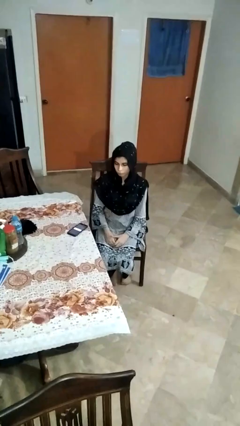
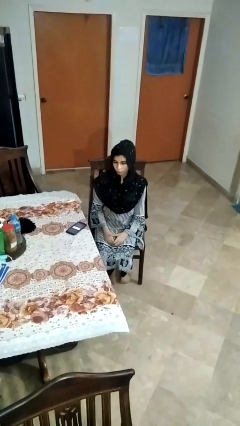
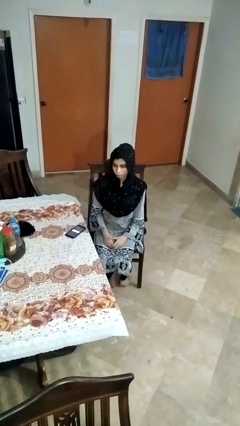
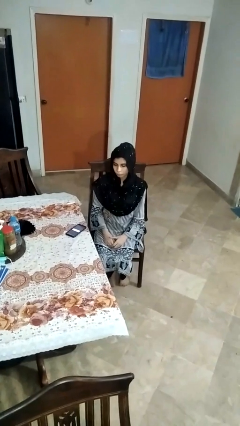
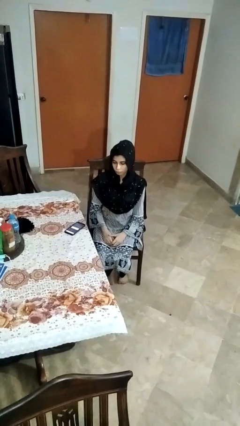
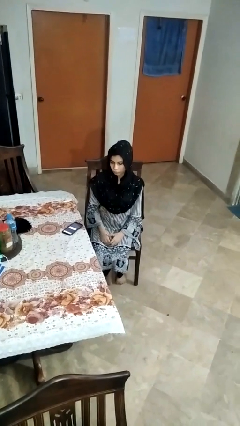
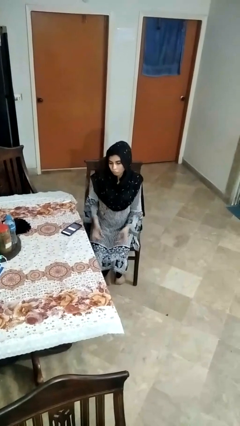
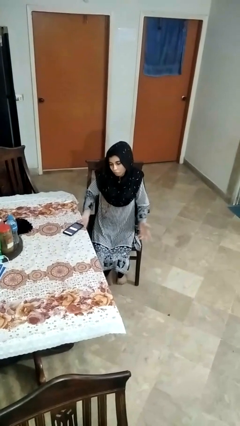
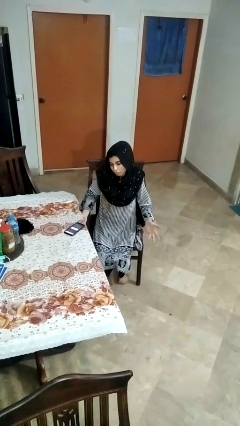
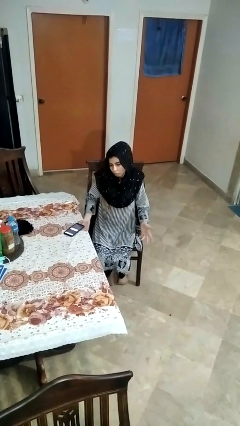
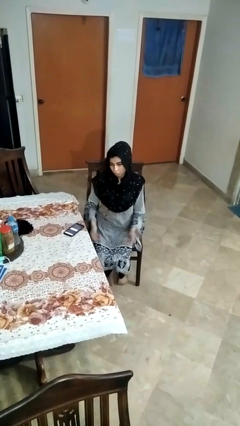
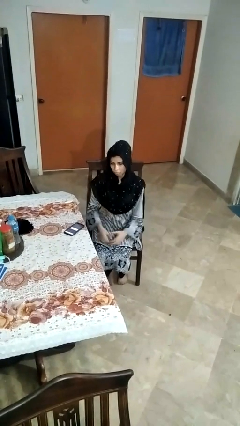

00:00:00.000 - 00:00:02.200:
person shrugs

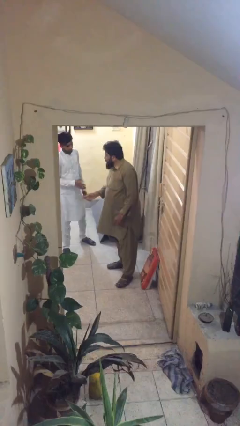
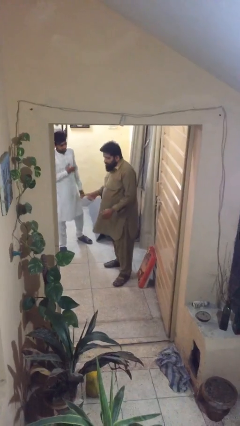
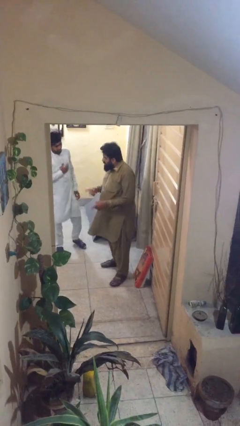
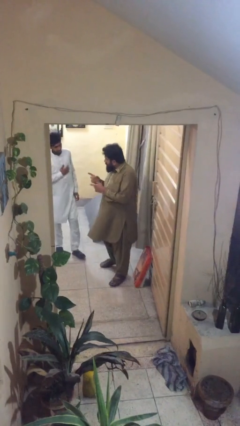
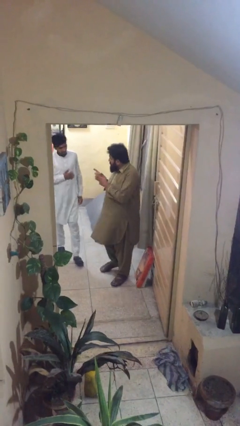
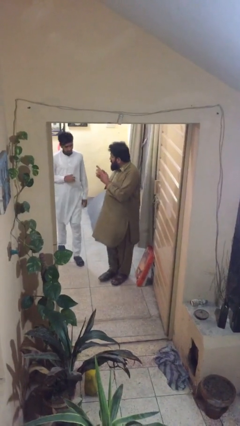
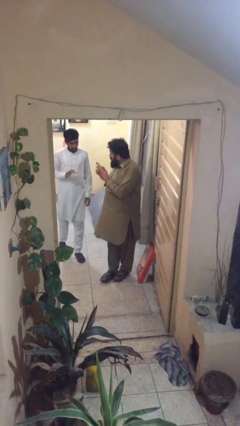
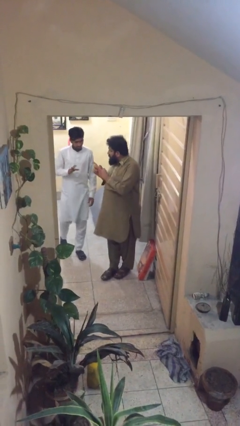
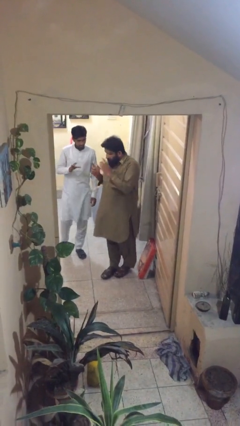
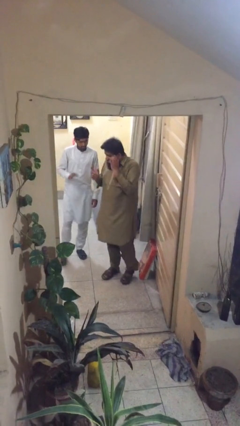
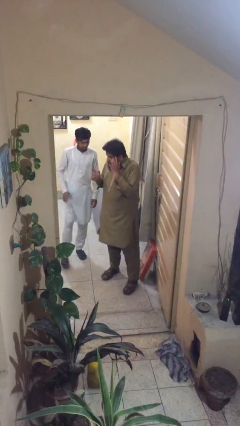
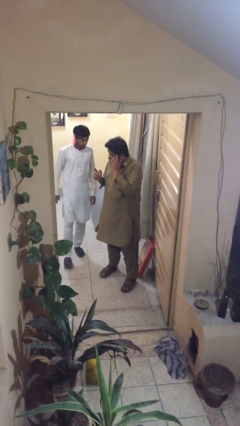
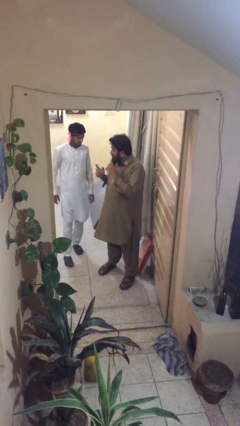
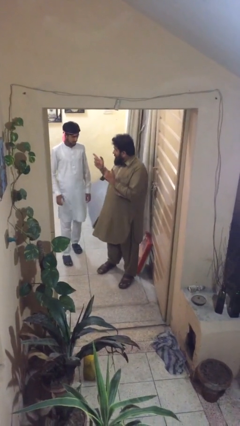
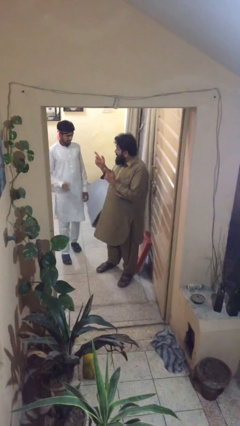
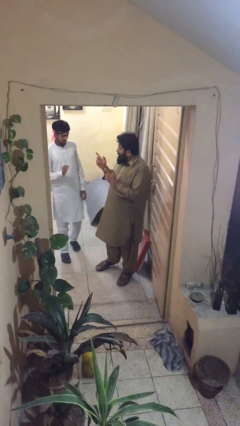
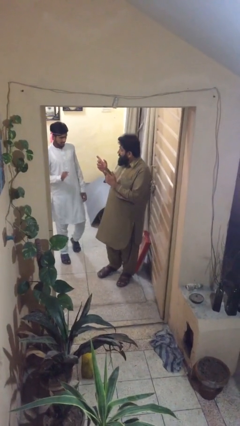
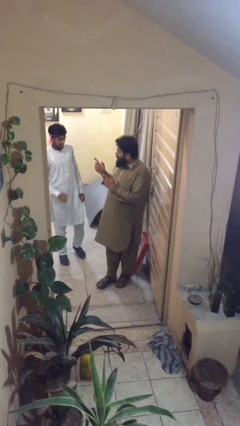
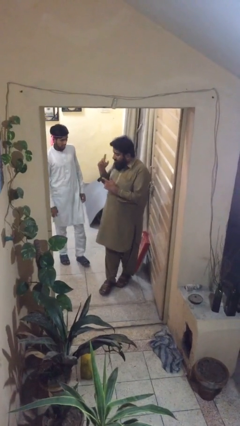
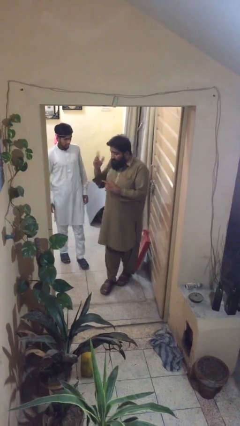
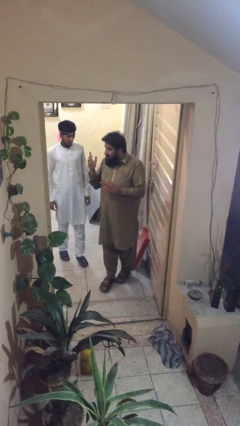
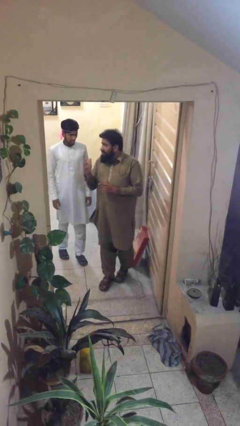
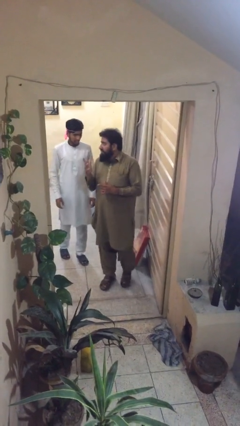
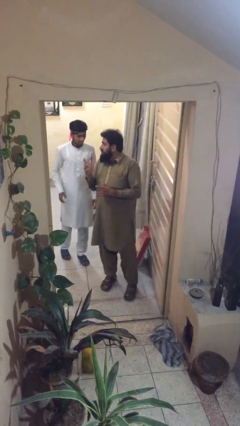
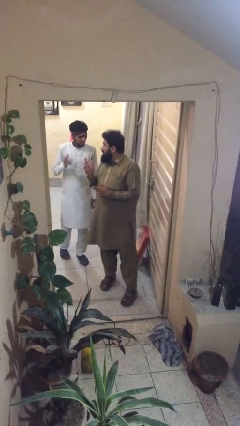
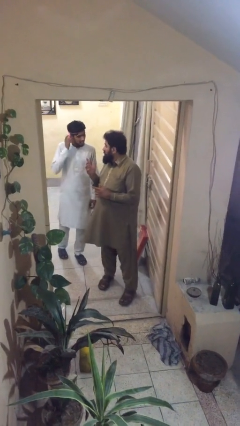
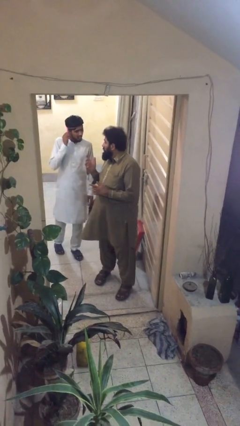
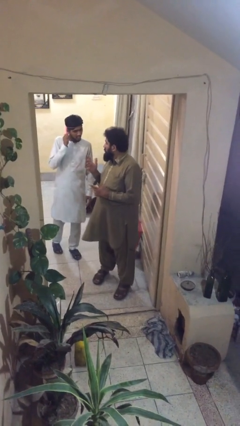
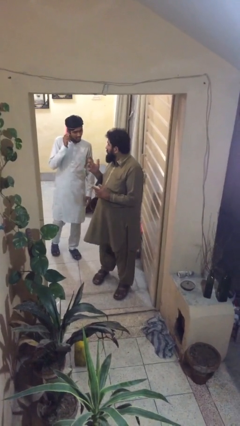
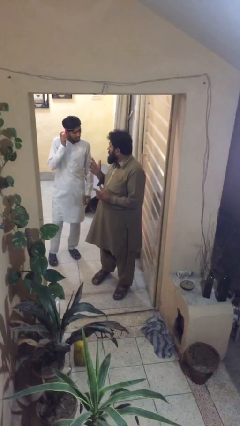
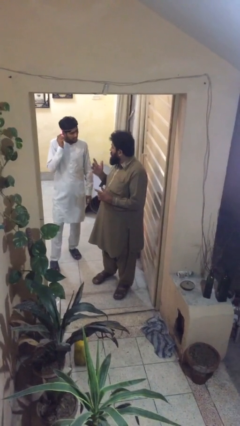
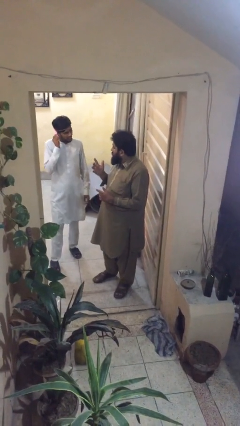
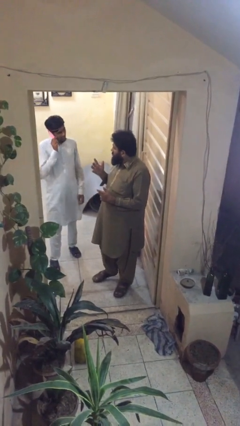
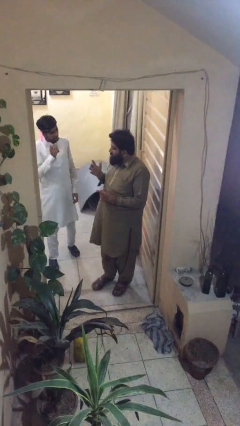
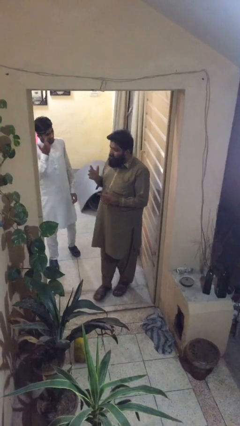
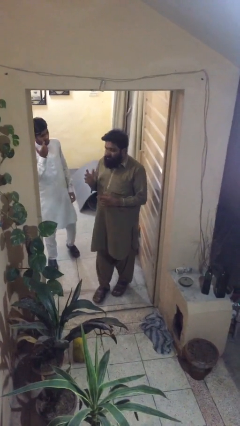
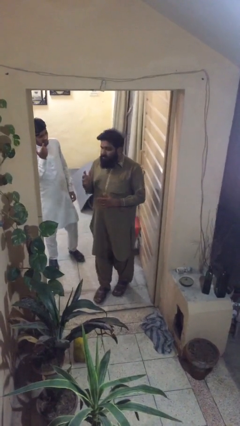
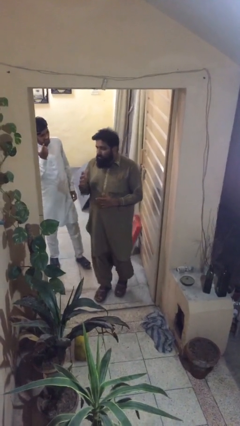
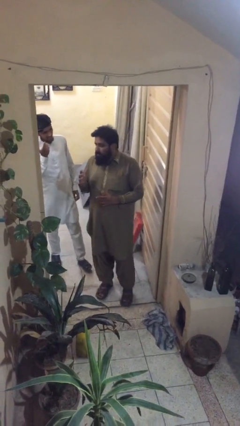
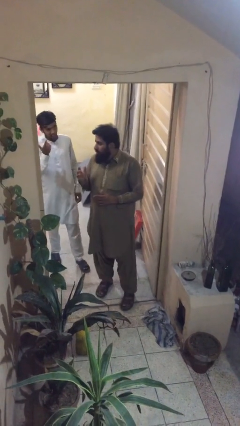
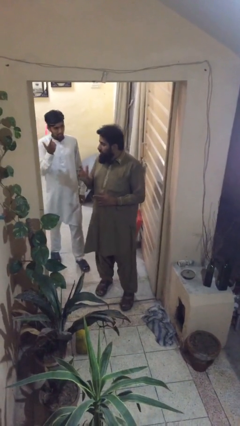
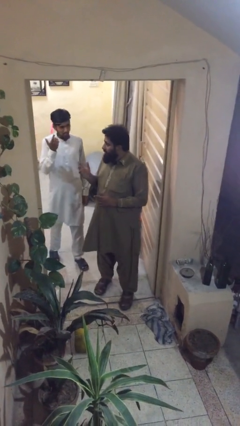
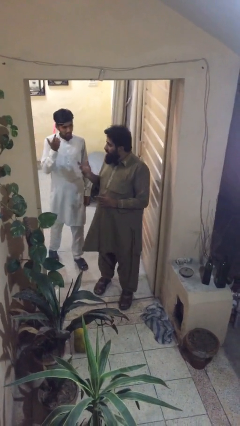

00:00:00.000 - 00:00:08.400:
person talks to person

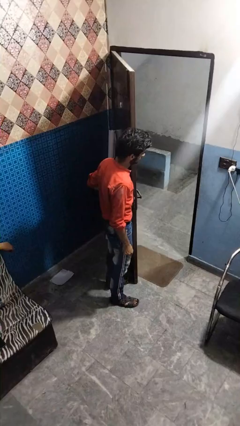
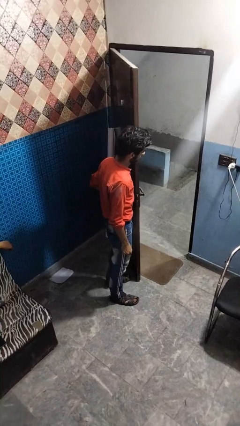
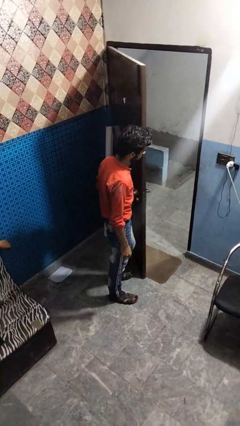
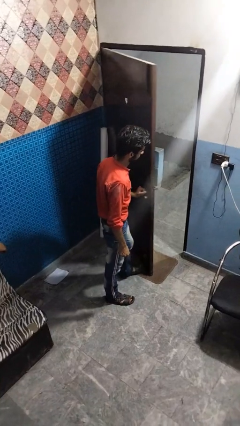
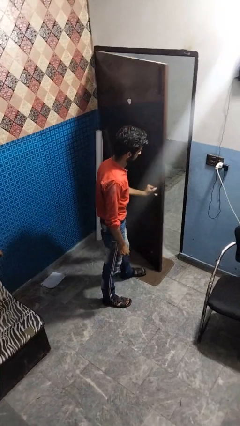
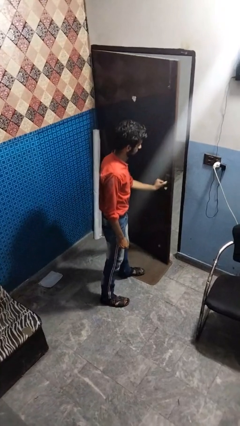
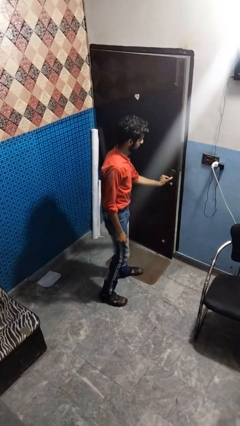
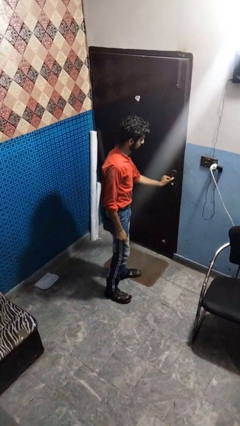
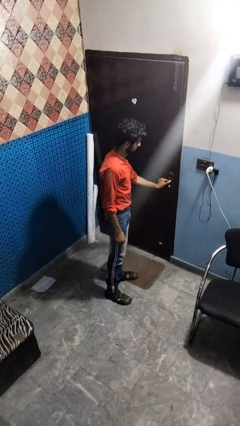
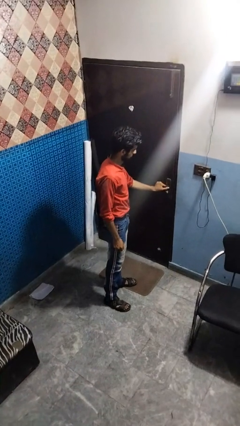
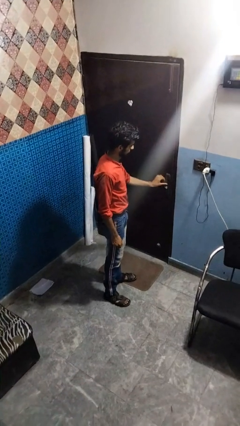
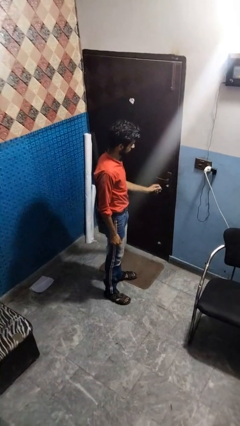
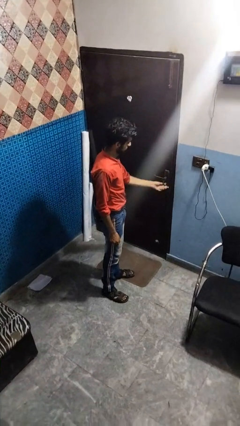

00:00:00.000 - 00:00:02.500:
person closes facility door

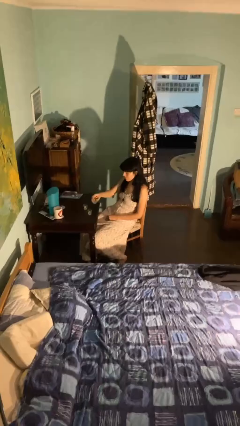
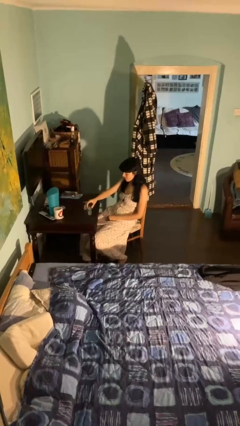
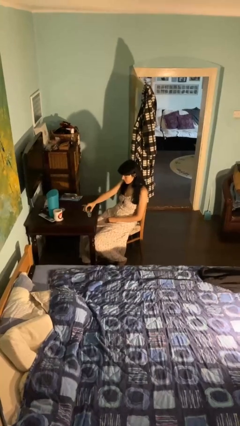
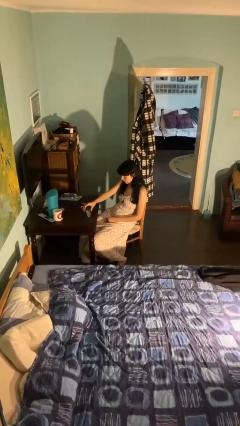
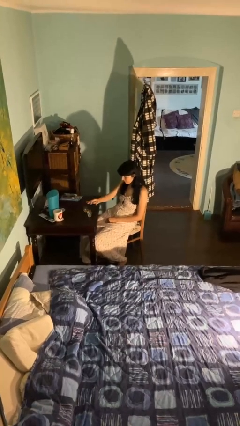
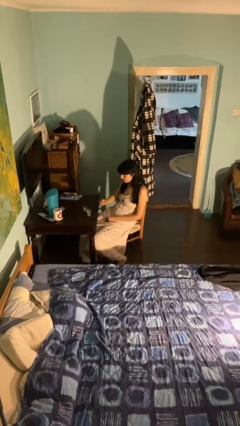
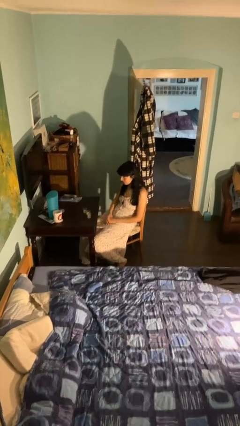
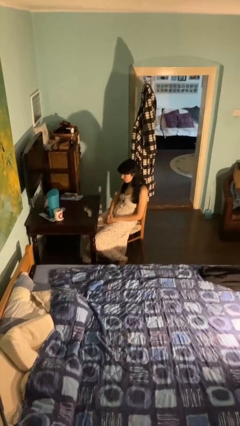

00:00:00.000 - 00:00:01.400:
person puts down object on table

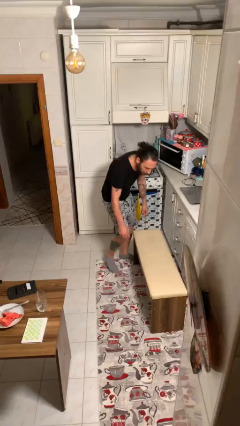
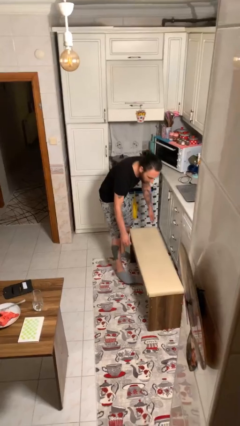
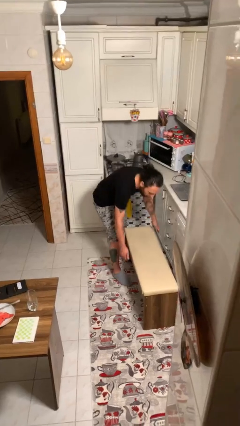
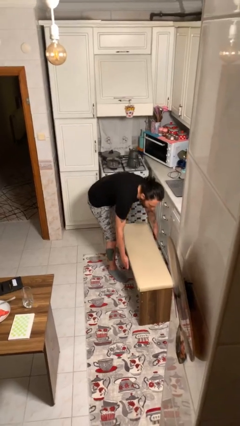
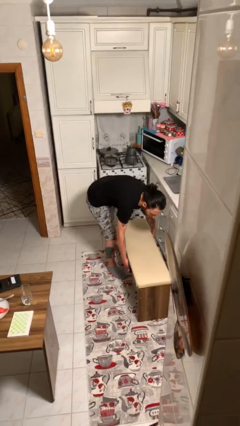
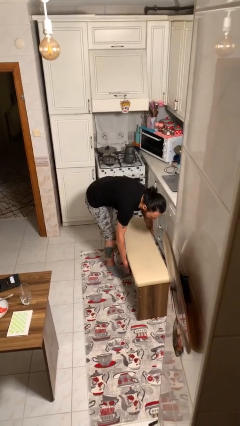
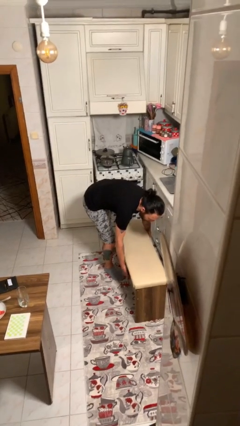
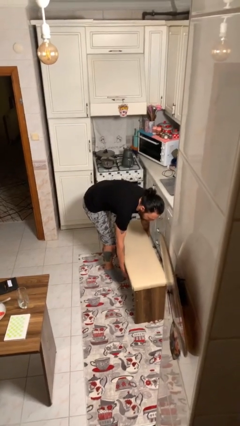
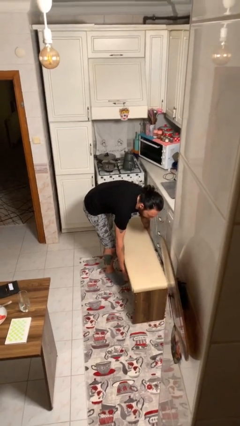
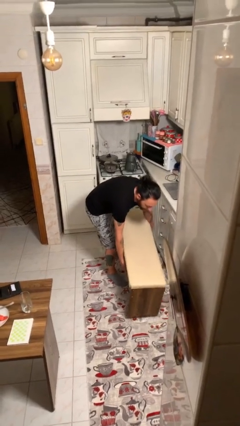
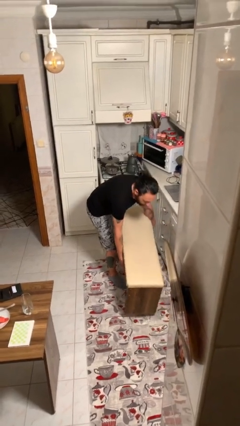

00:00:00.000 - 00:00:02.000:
person picks up object from floor

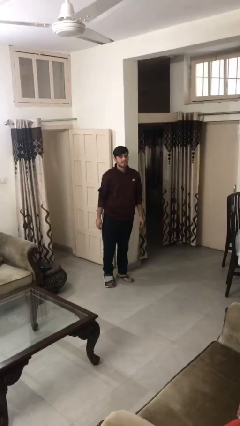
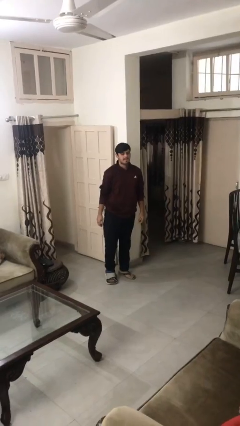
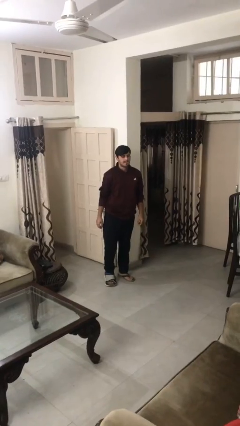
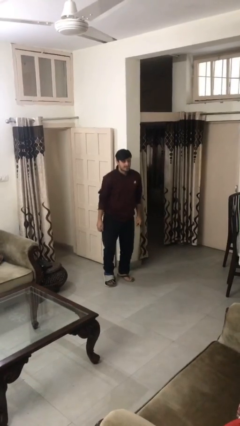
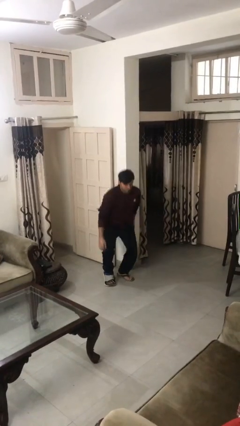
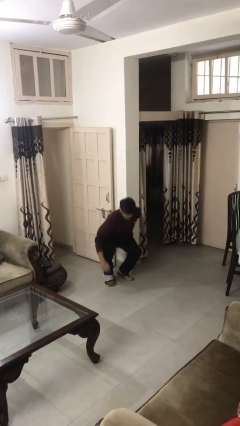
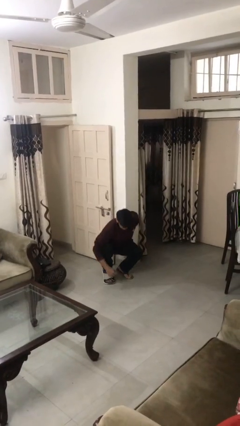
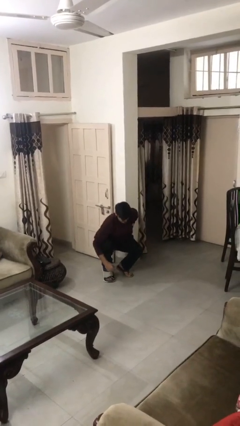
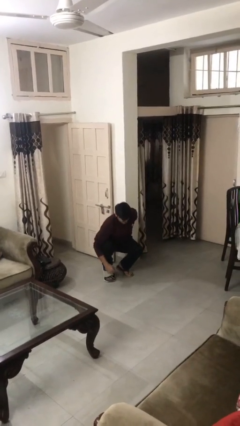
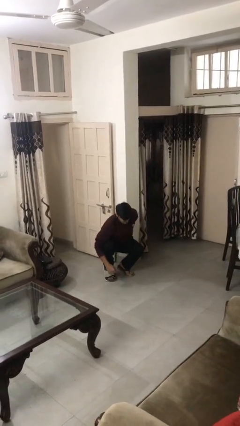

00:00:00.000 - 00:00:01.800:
person sits down
